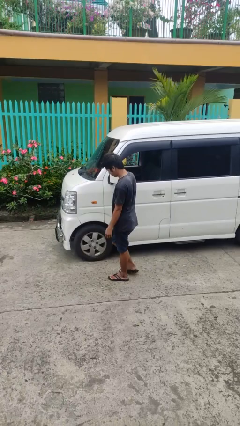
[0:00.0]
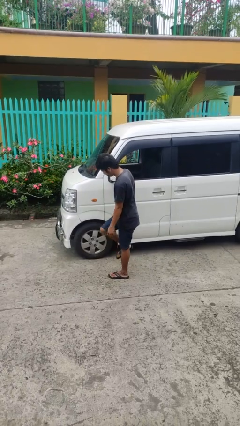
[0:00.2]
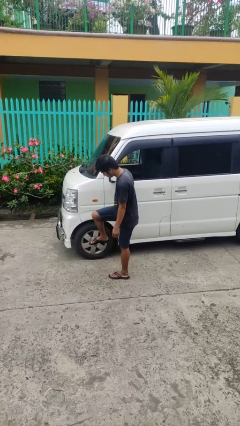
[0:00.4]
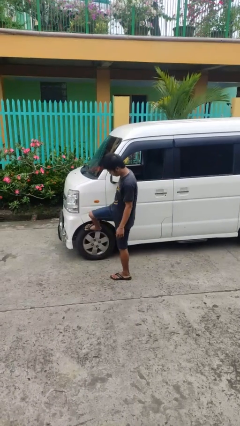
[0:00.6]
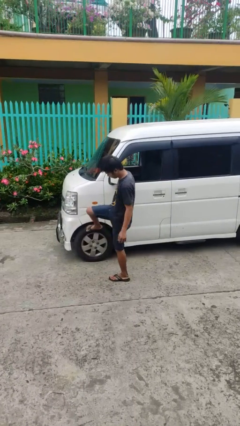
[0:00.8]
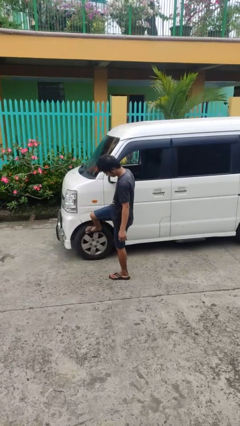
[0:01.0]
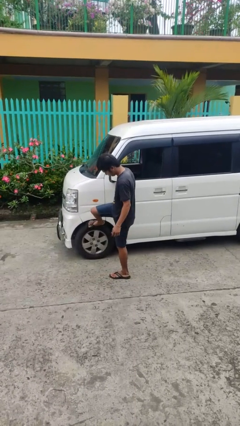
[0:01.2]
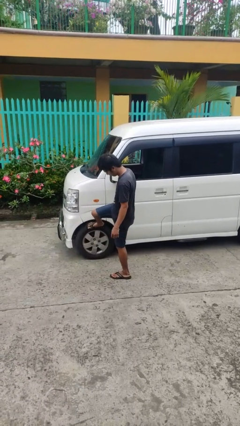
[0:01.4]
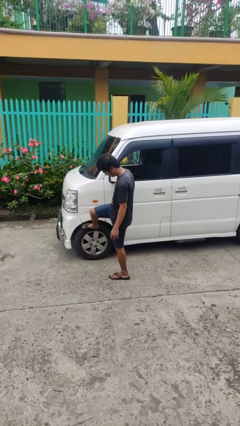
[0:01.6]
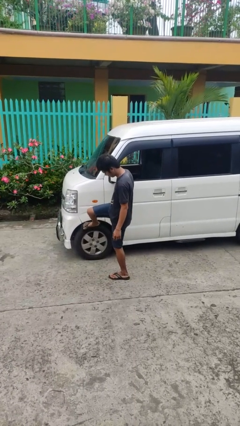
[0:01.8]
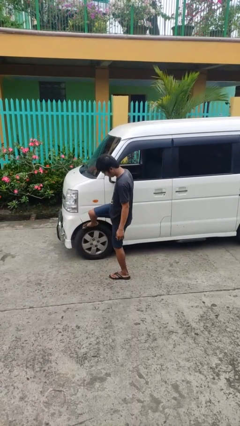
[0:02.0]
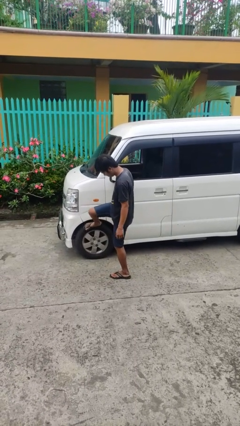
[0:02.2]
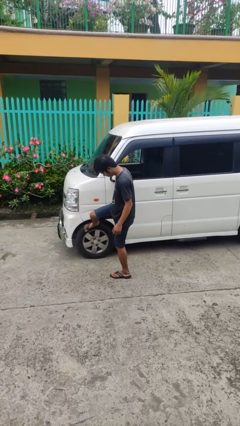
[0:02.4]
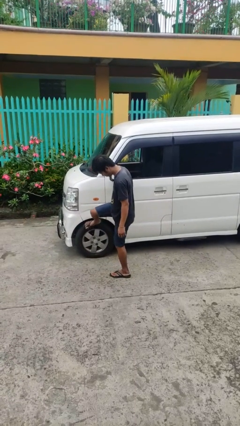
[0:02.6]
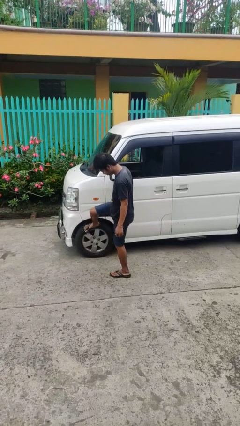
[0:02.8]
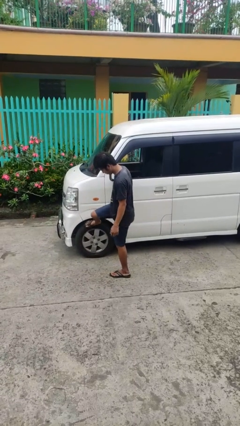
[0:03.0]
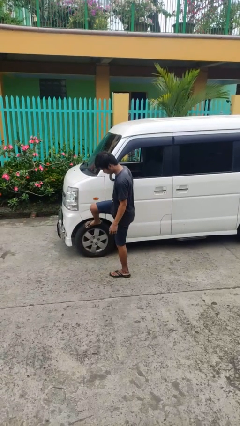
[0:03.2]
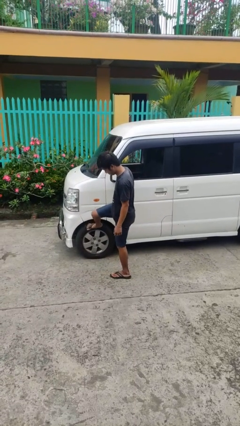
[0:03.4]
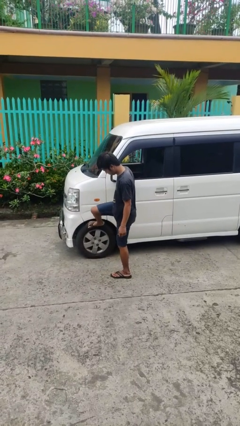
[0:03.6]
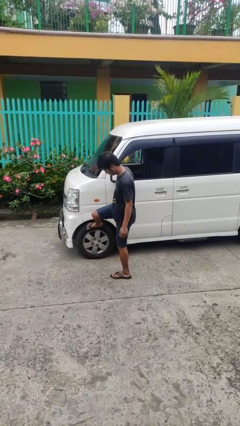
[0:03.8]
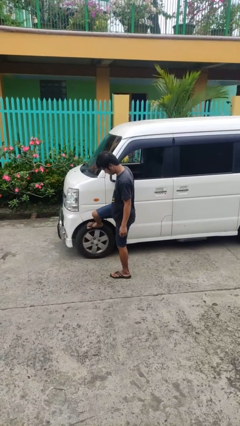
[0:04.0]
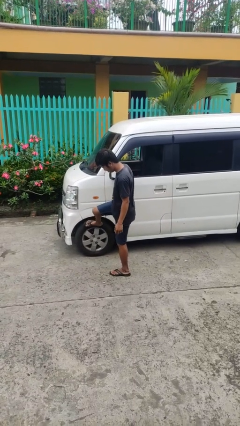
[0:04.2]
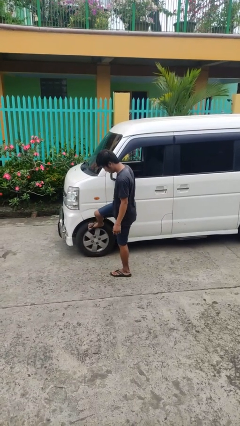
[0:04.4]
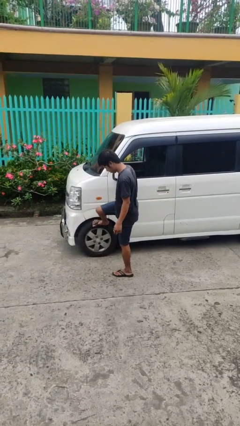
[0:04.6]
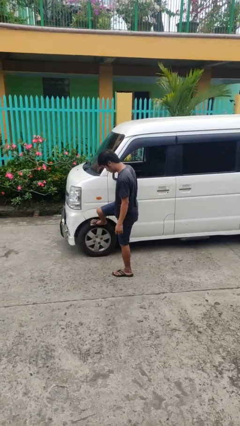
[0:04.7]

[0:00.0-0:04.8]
person kicks car tires

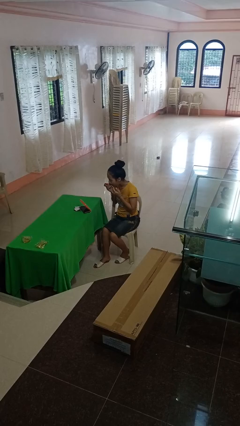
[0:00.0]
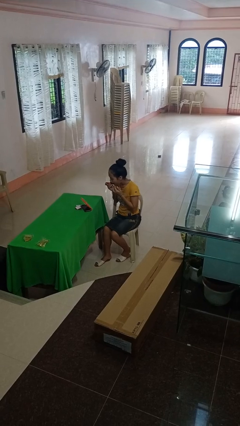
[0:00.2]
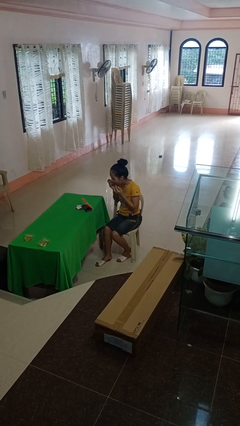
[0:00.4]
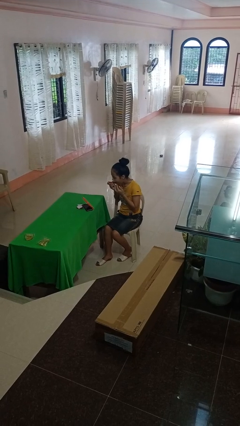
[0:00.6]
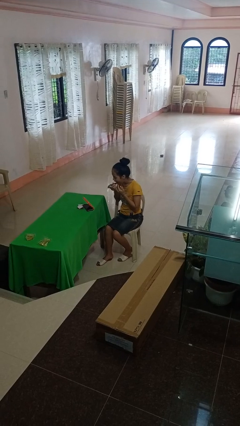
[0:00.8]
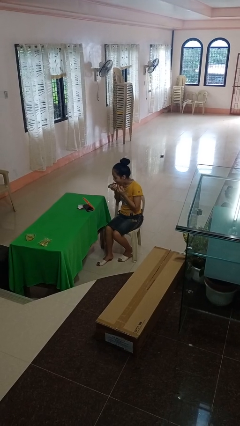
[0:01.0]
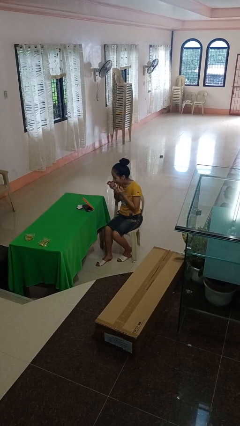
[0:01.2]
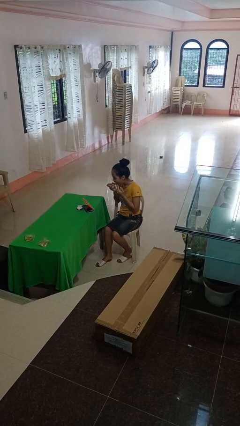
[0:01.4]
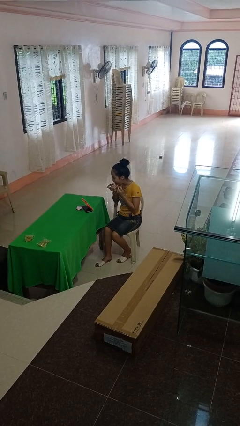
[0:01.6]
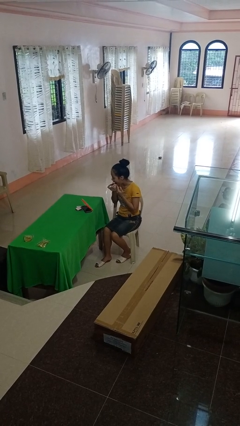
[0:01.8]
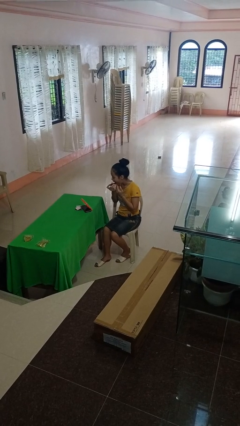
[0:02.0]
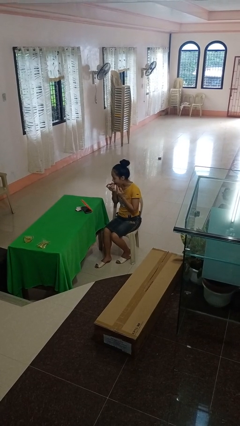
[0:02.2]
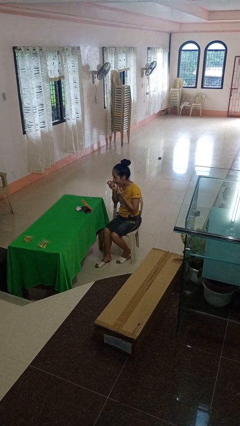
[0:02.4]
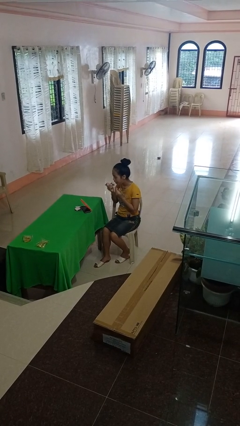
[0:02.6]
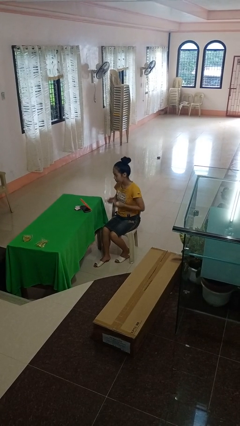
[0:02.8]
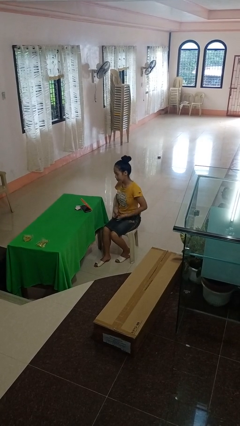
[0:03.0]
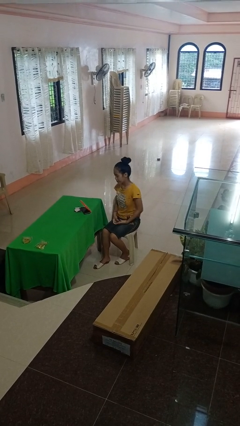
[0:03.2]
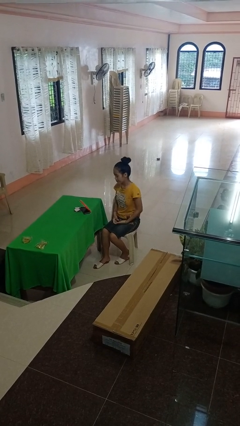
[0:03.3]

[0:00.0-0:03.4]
person applies lip makeup

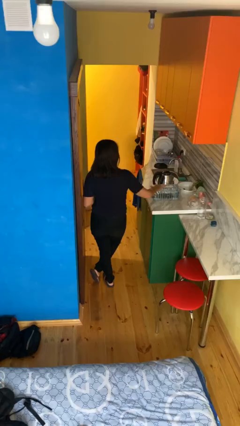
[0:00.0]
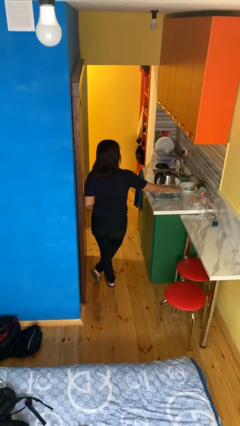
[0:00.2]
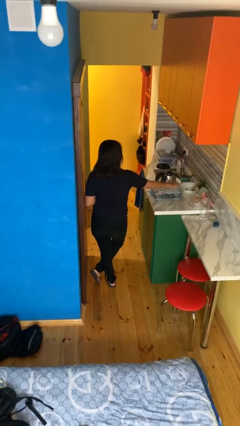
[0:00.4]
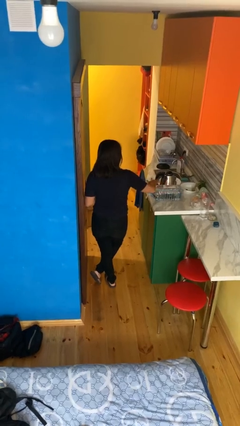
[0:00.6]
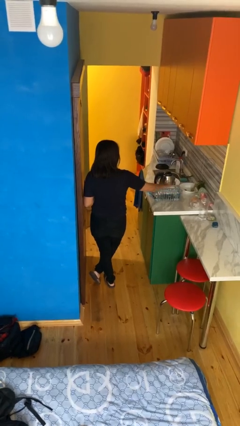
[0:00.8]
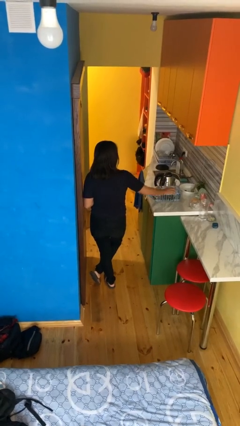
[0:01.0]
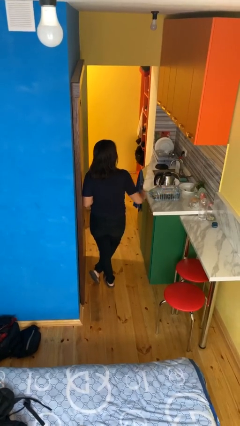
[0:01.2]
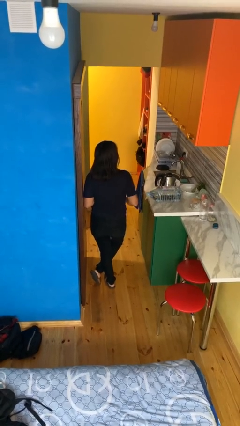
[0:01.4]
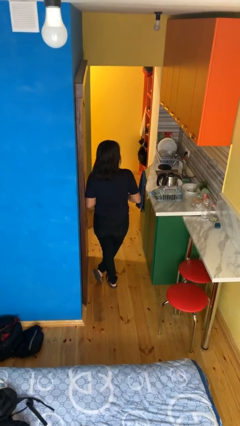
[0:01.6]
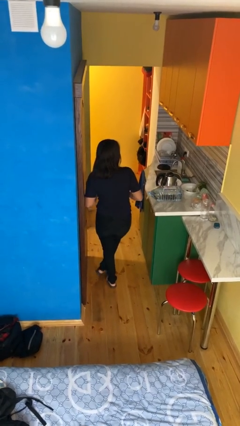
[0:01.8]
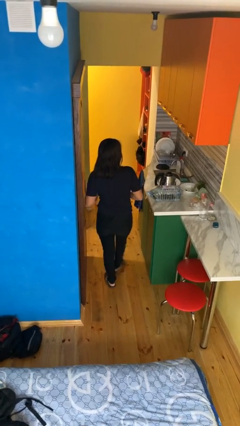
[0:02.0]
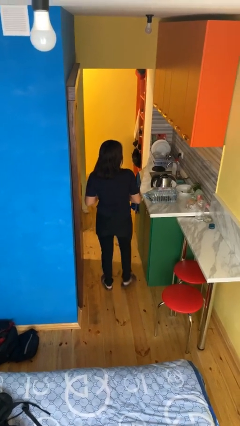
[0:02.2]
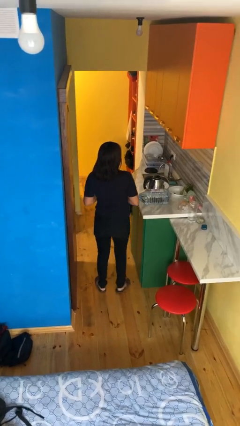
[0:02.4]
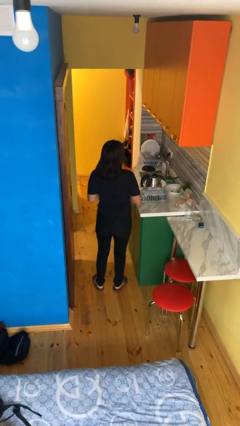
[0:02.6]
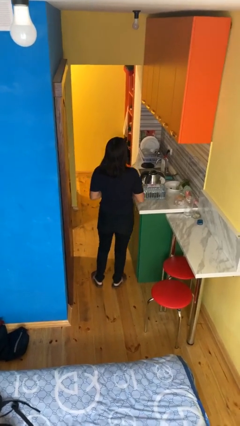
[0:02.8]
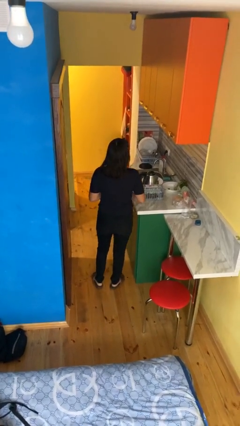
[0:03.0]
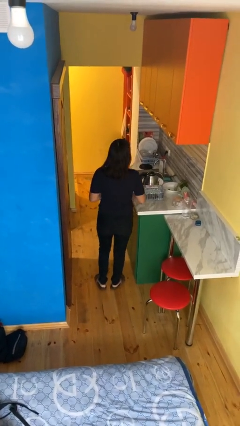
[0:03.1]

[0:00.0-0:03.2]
person waves hand over object

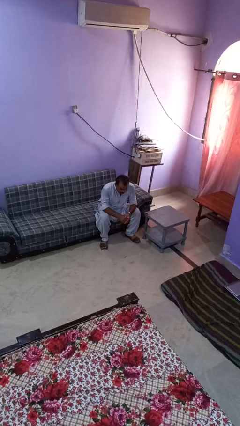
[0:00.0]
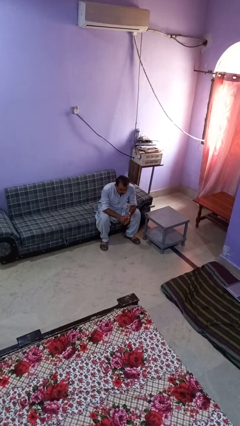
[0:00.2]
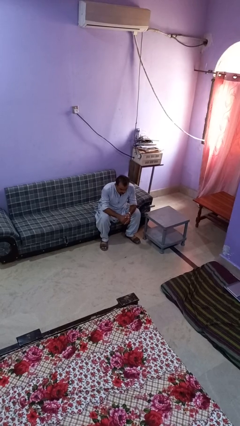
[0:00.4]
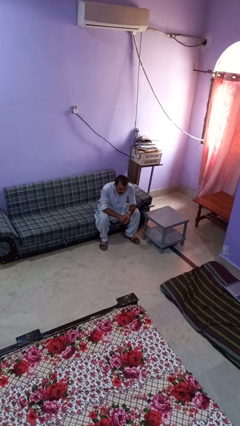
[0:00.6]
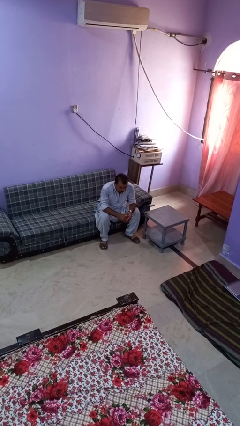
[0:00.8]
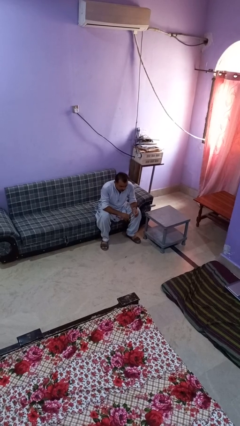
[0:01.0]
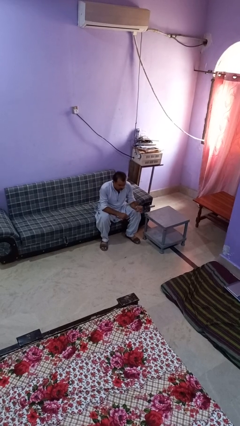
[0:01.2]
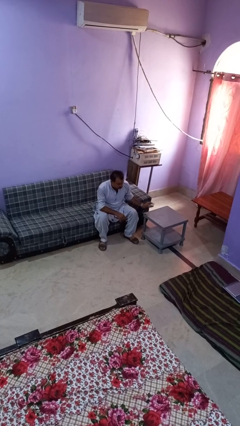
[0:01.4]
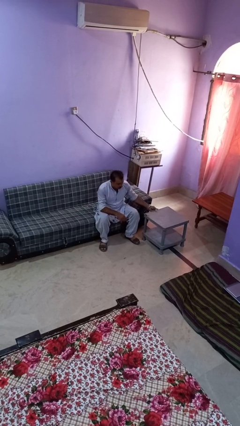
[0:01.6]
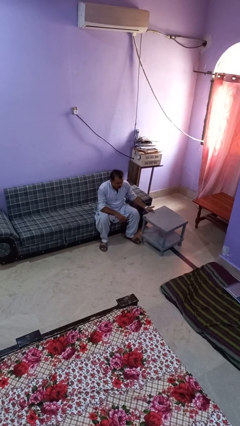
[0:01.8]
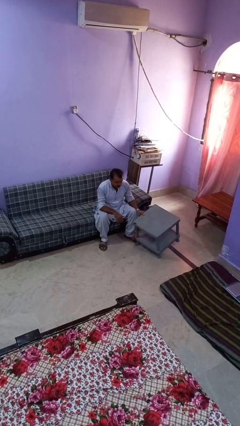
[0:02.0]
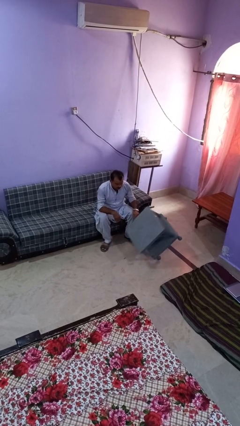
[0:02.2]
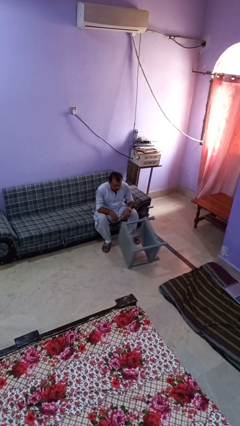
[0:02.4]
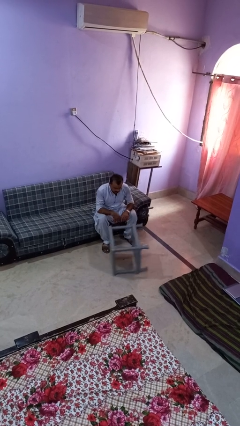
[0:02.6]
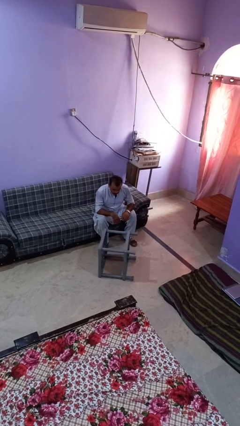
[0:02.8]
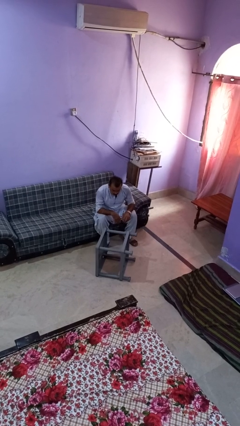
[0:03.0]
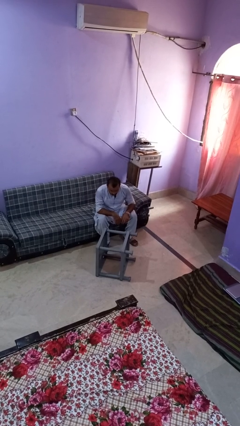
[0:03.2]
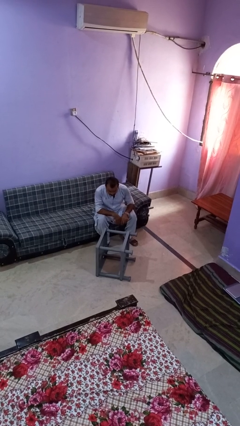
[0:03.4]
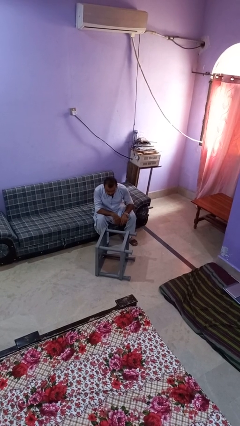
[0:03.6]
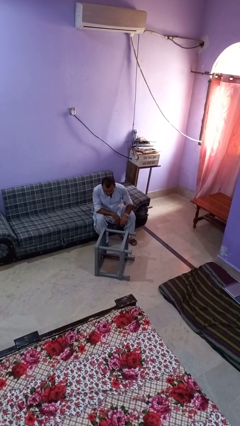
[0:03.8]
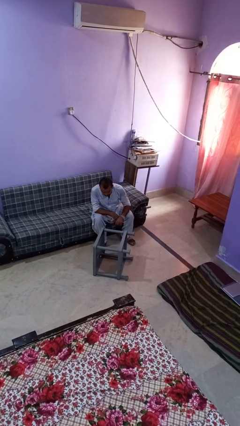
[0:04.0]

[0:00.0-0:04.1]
person knocks over furniture

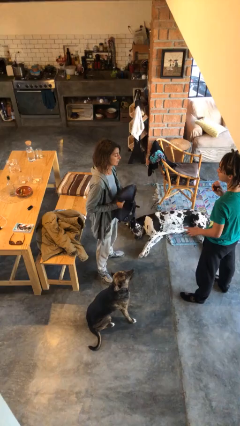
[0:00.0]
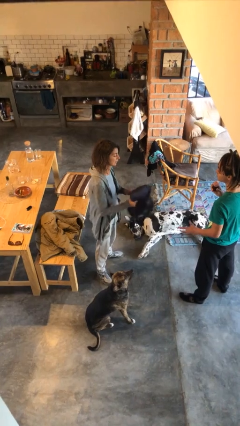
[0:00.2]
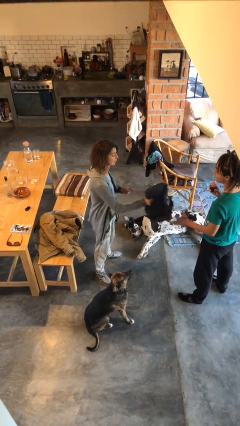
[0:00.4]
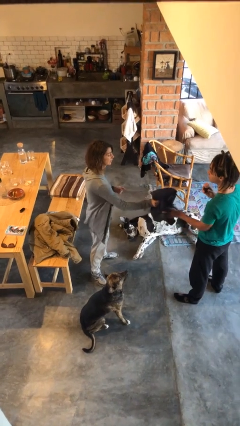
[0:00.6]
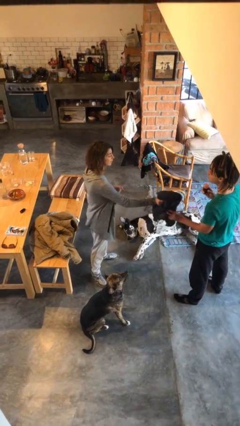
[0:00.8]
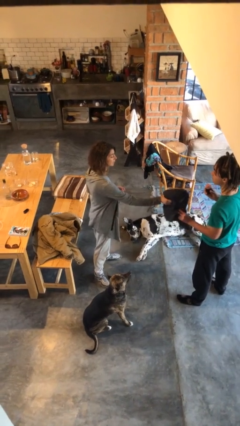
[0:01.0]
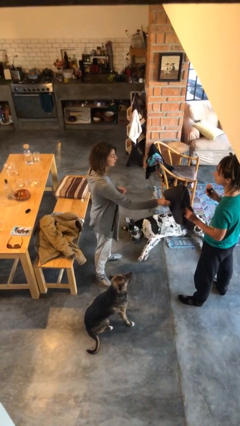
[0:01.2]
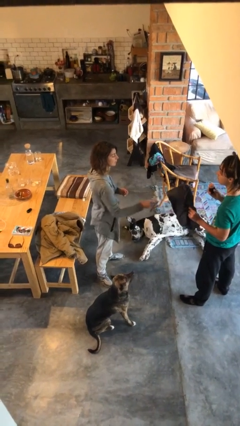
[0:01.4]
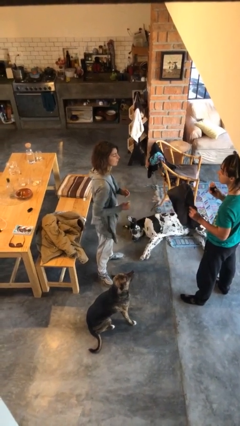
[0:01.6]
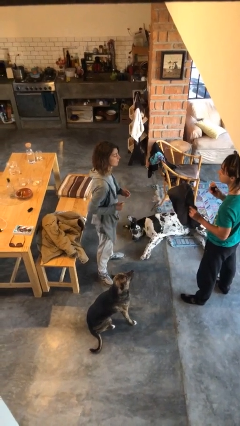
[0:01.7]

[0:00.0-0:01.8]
person transfers object to person

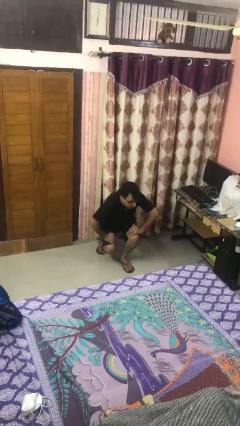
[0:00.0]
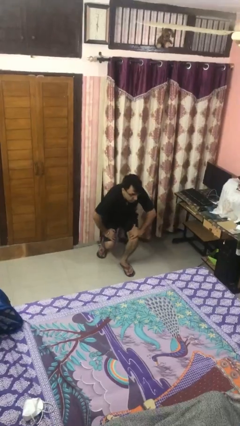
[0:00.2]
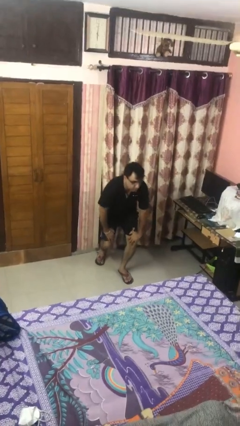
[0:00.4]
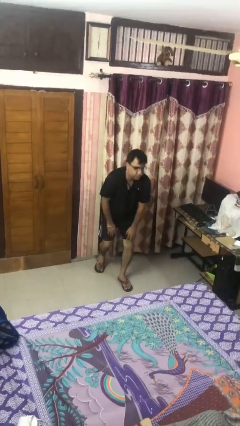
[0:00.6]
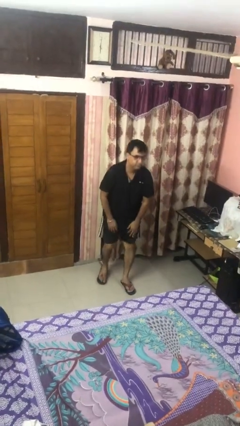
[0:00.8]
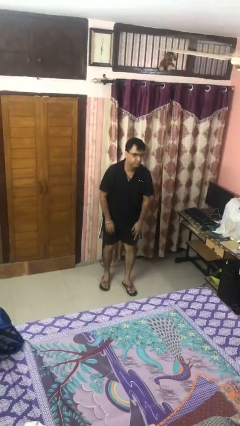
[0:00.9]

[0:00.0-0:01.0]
person stands up from floor
